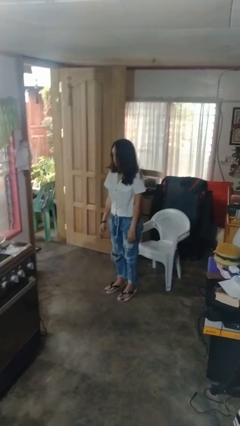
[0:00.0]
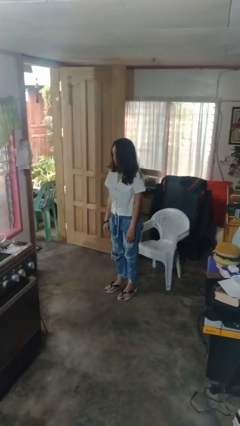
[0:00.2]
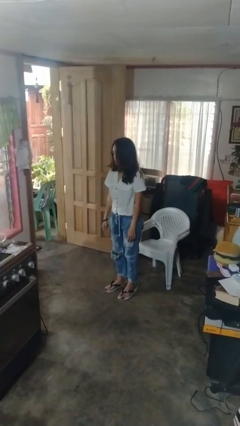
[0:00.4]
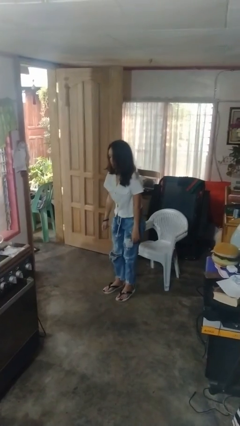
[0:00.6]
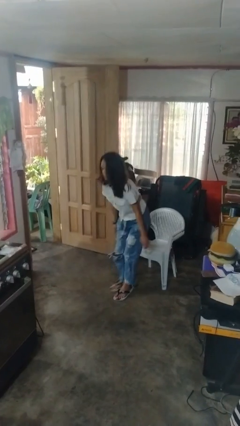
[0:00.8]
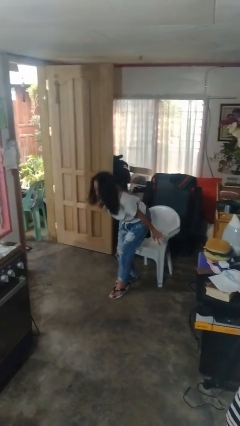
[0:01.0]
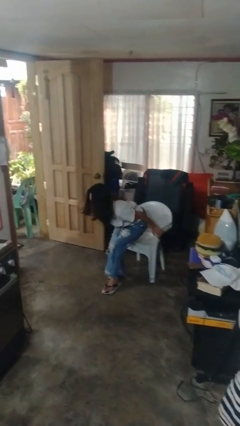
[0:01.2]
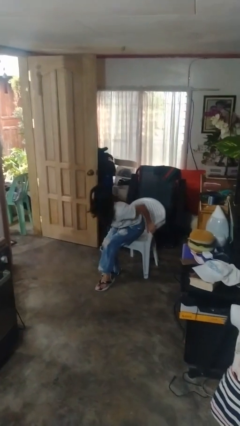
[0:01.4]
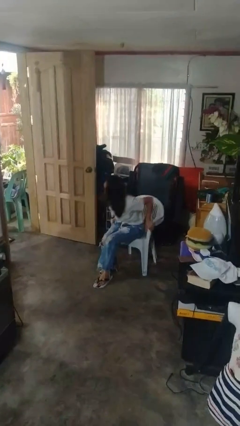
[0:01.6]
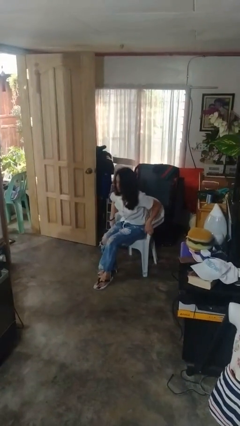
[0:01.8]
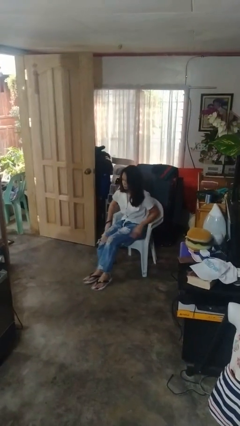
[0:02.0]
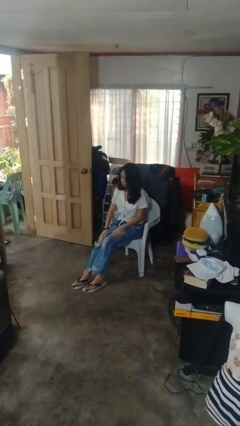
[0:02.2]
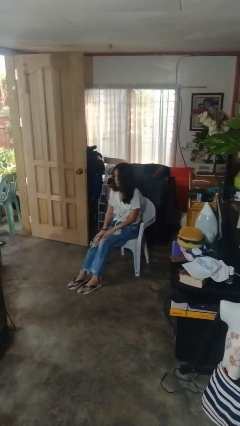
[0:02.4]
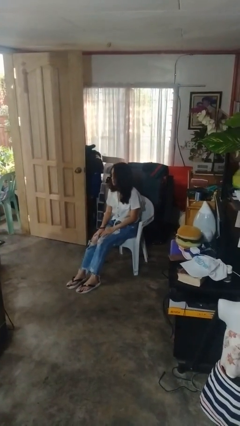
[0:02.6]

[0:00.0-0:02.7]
person sits down

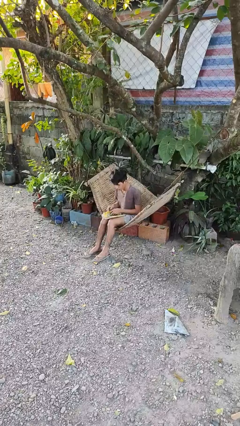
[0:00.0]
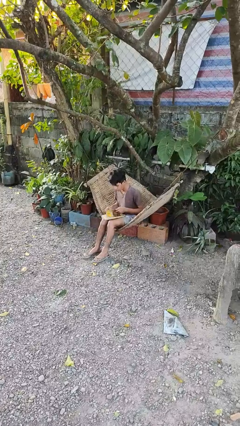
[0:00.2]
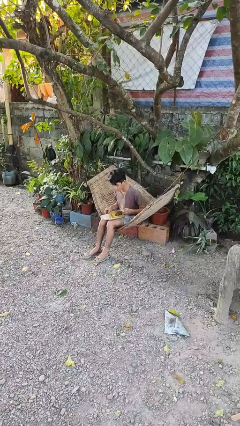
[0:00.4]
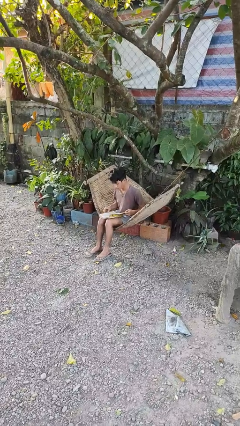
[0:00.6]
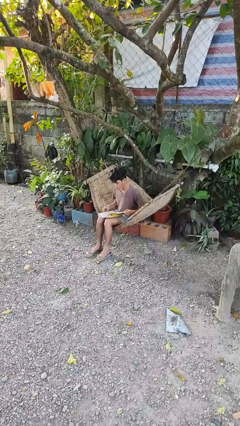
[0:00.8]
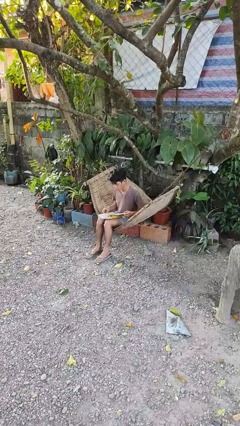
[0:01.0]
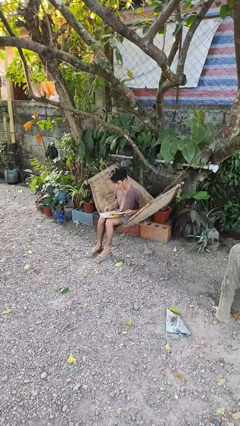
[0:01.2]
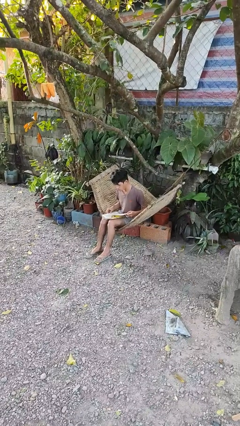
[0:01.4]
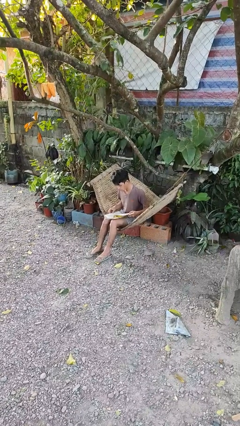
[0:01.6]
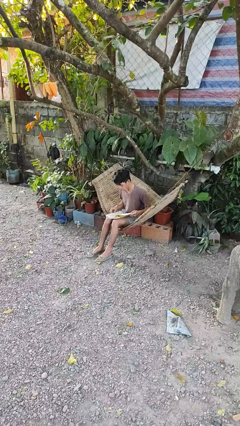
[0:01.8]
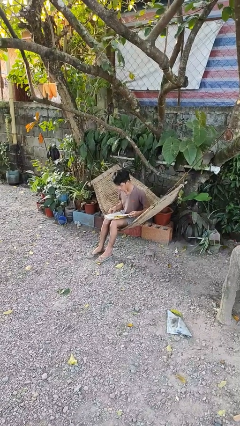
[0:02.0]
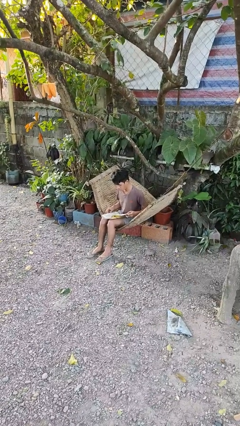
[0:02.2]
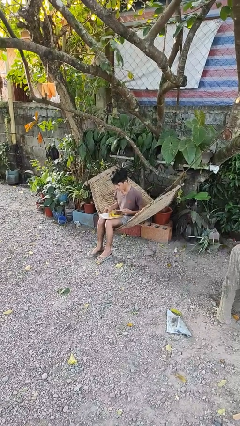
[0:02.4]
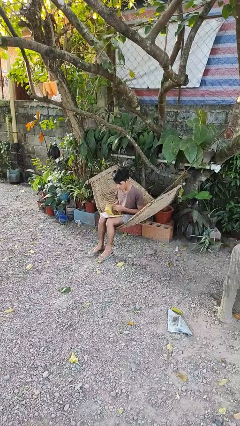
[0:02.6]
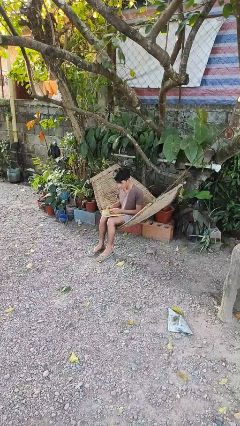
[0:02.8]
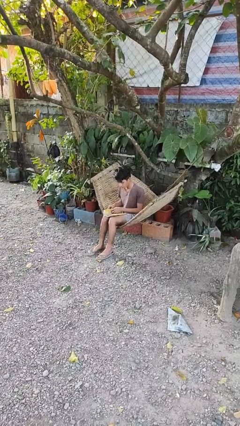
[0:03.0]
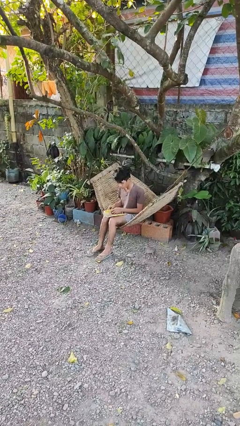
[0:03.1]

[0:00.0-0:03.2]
person reads book

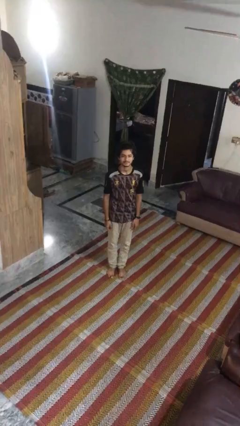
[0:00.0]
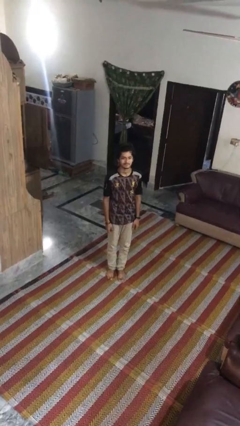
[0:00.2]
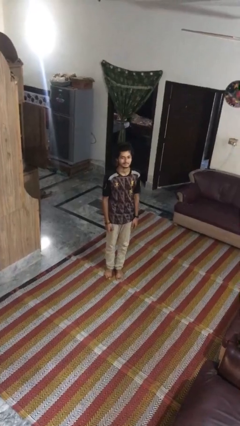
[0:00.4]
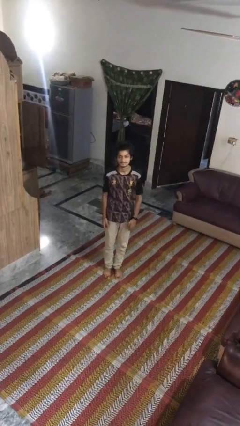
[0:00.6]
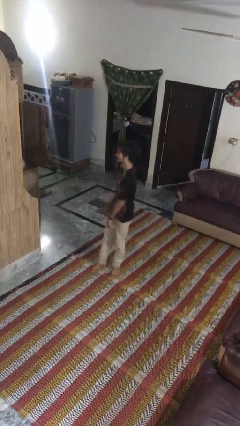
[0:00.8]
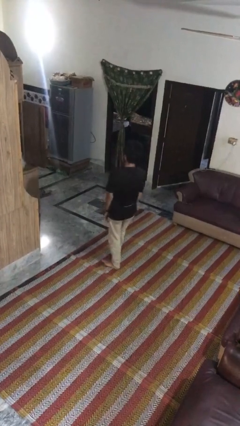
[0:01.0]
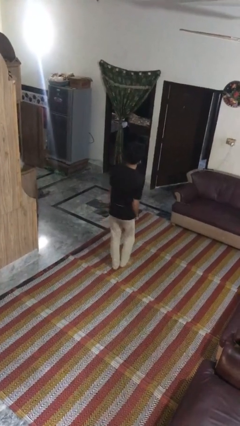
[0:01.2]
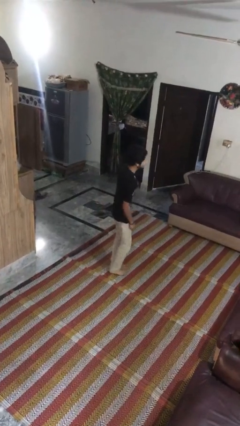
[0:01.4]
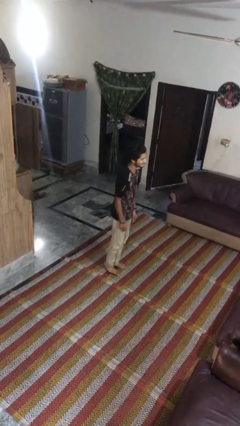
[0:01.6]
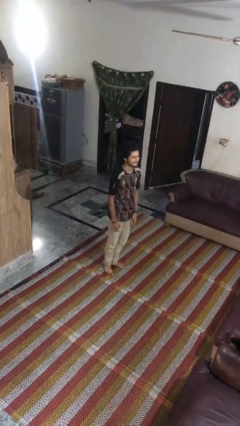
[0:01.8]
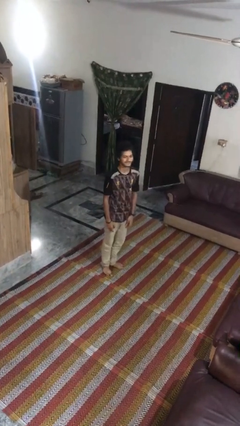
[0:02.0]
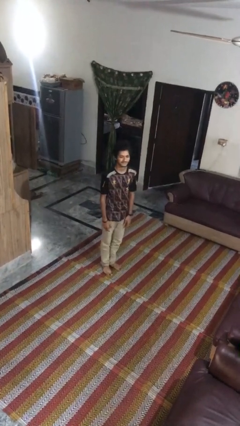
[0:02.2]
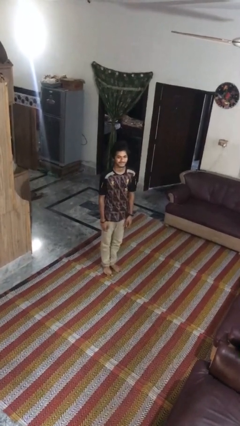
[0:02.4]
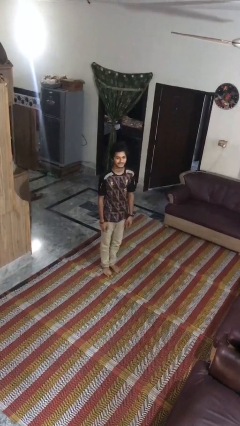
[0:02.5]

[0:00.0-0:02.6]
person twirls

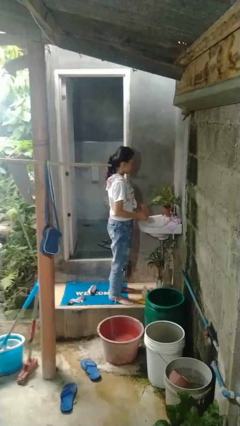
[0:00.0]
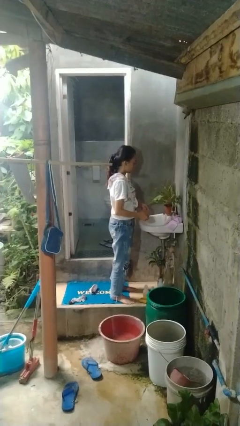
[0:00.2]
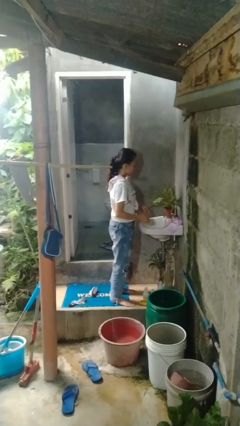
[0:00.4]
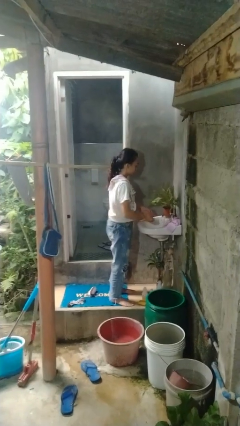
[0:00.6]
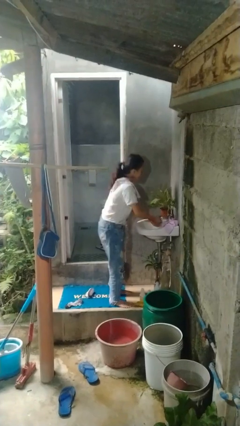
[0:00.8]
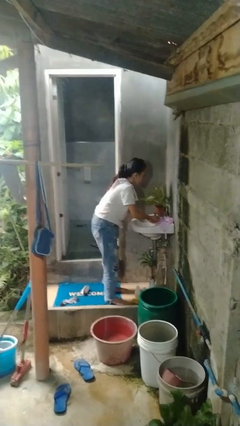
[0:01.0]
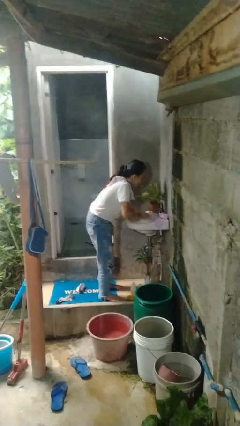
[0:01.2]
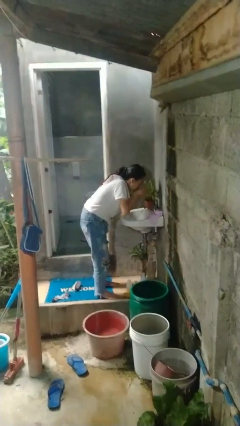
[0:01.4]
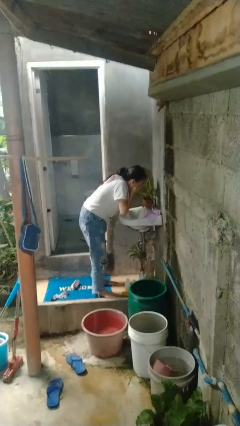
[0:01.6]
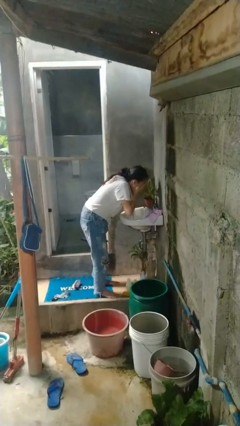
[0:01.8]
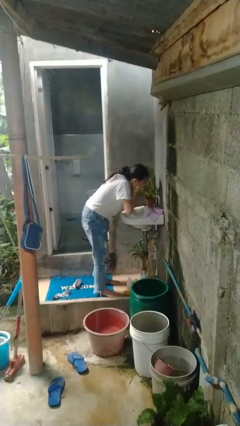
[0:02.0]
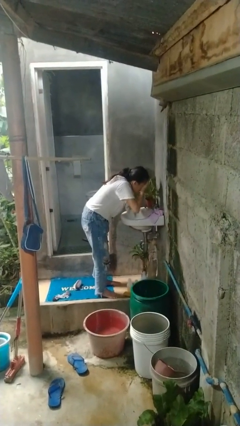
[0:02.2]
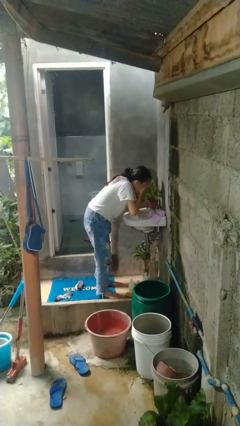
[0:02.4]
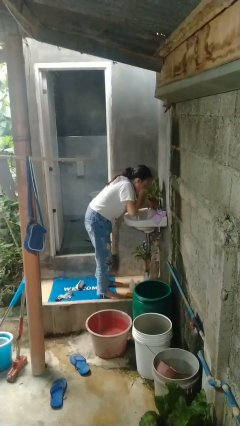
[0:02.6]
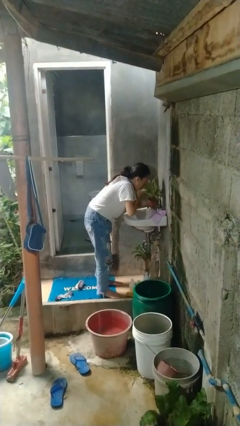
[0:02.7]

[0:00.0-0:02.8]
person washes face

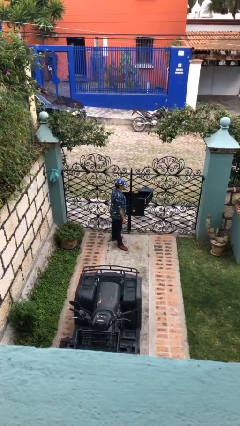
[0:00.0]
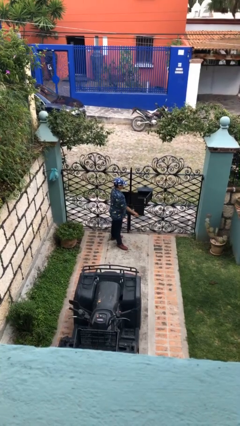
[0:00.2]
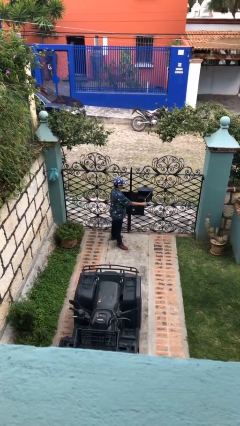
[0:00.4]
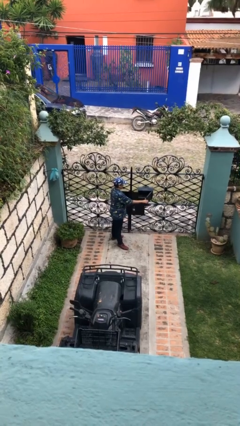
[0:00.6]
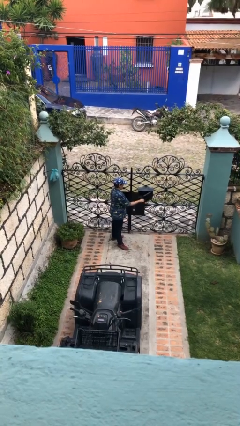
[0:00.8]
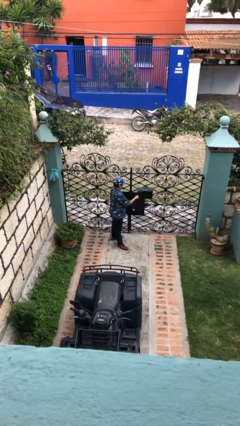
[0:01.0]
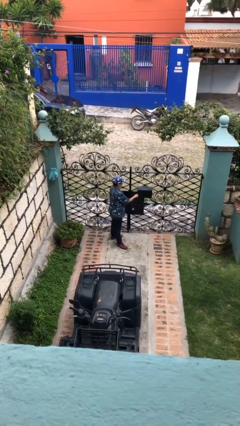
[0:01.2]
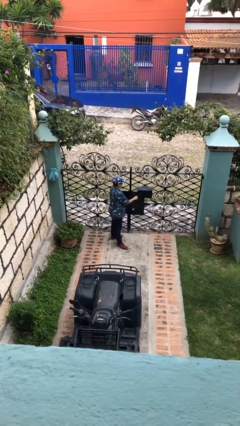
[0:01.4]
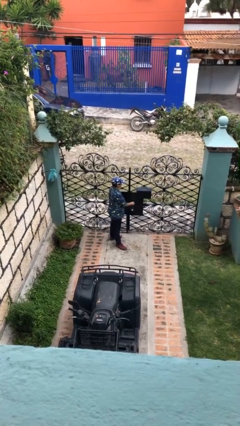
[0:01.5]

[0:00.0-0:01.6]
person closes mailbox

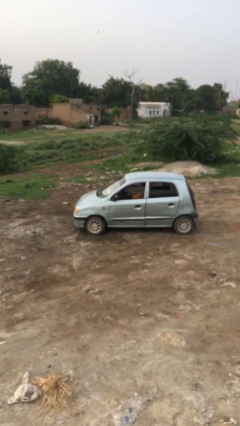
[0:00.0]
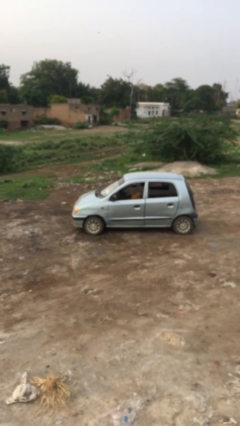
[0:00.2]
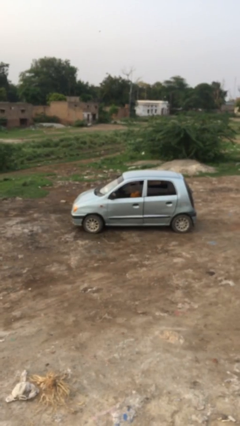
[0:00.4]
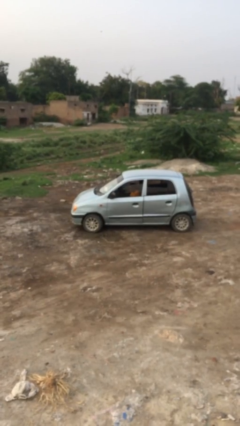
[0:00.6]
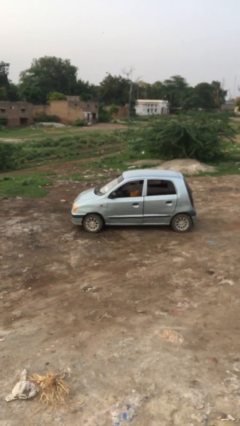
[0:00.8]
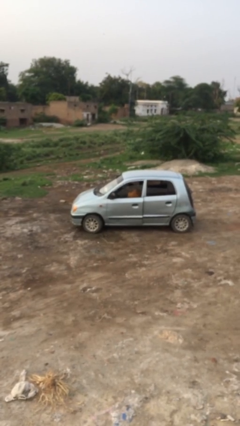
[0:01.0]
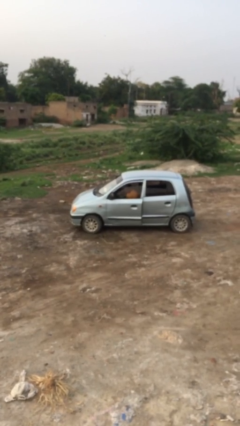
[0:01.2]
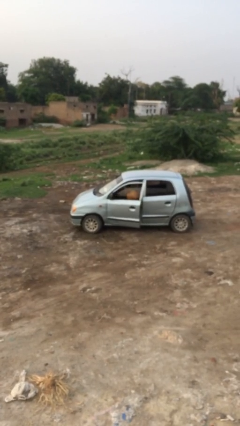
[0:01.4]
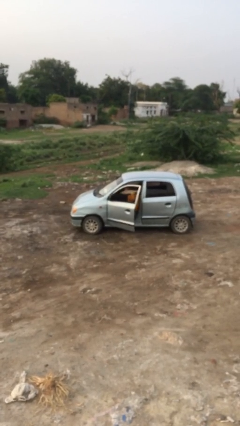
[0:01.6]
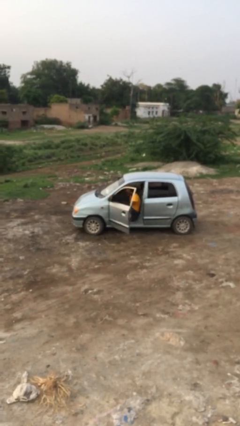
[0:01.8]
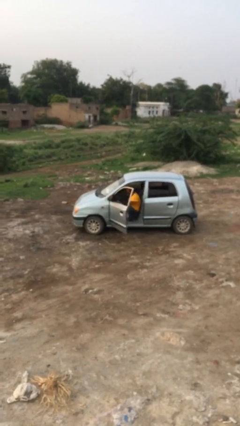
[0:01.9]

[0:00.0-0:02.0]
person opens car door

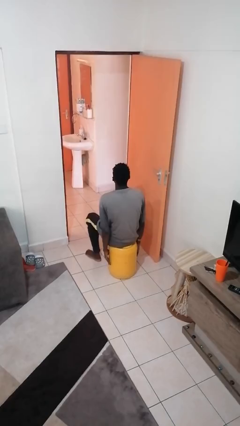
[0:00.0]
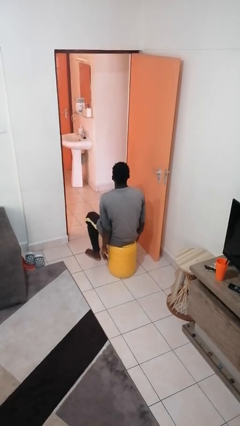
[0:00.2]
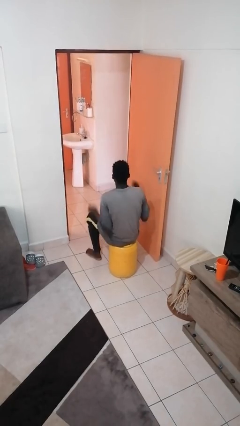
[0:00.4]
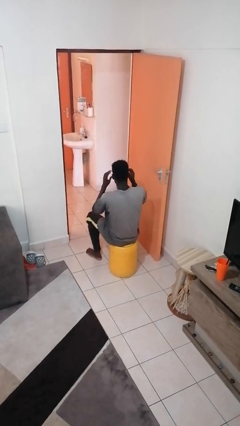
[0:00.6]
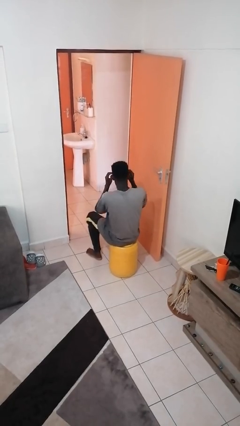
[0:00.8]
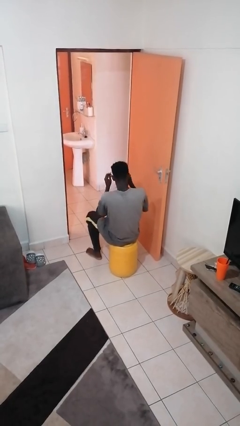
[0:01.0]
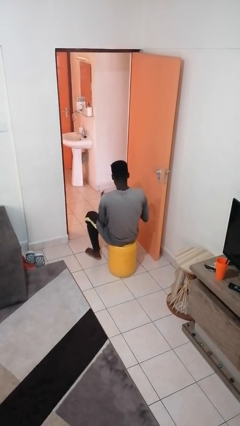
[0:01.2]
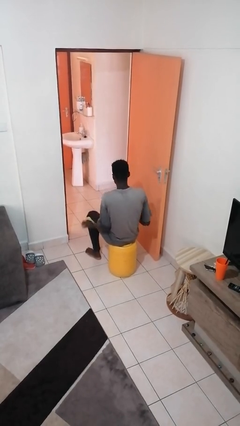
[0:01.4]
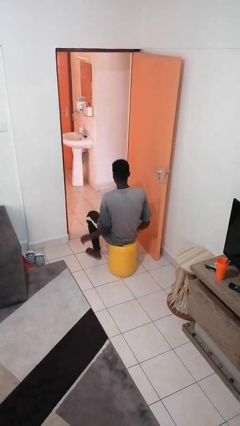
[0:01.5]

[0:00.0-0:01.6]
person takes off glasses

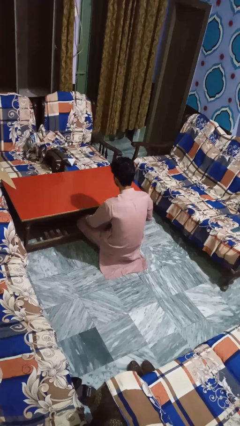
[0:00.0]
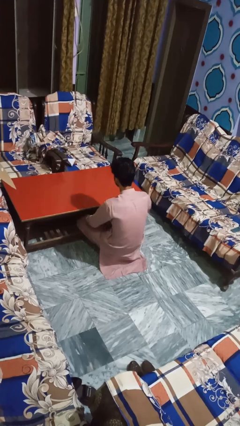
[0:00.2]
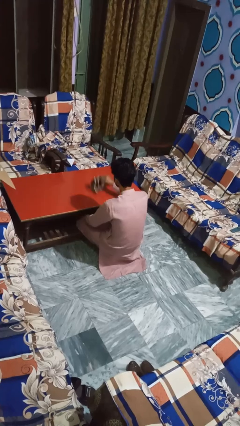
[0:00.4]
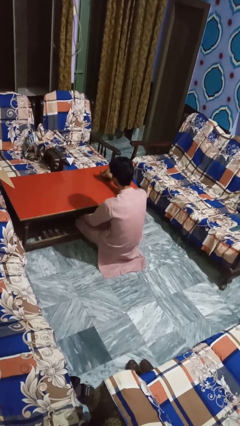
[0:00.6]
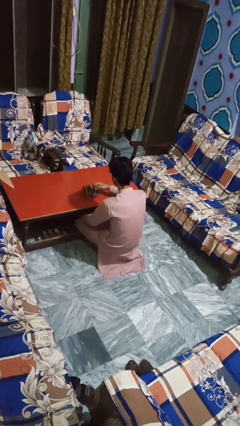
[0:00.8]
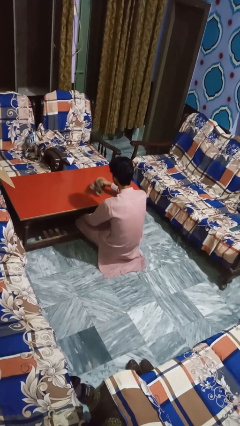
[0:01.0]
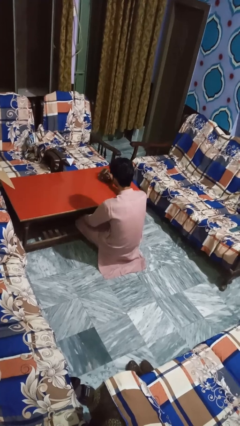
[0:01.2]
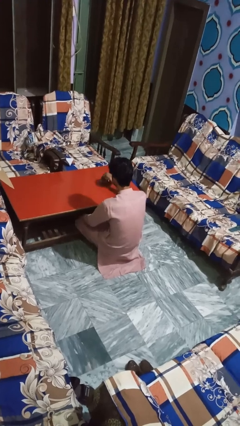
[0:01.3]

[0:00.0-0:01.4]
person cleans table with rag
